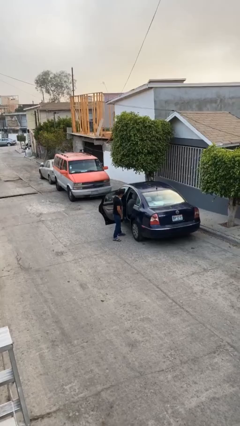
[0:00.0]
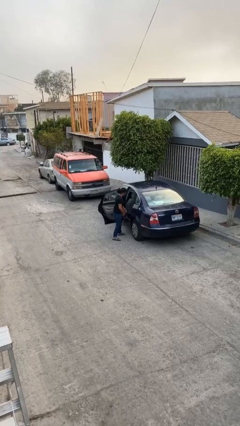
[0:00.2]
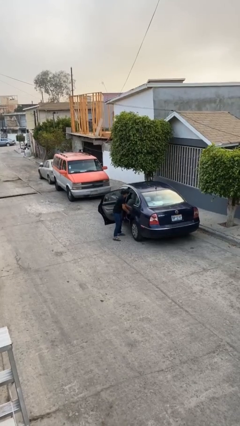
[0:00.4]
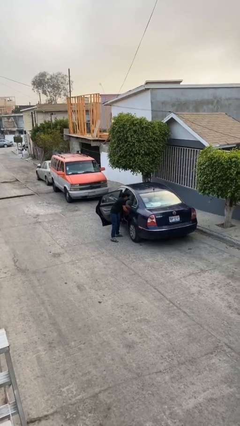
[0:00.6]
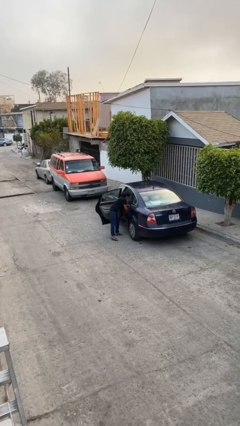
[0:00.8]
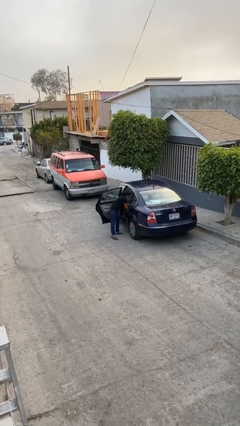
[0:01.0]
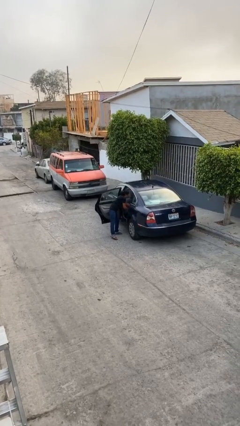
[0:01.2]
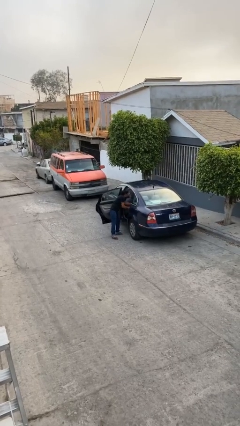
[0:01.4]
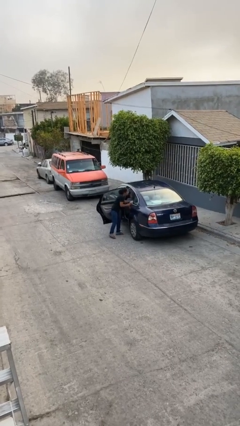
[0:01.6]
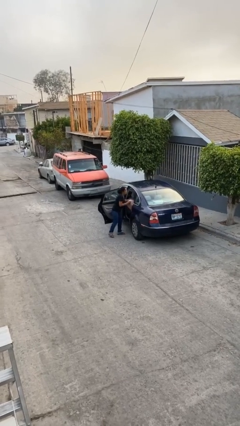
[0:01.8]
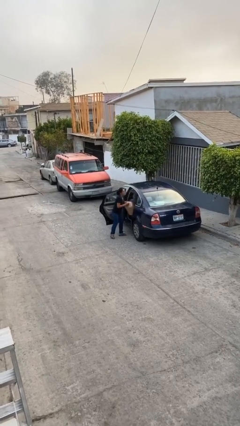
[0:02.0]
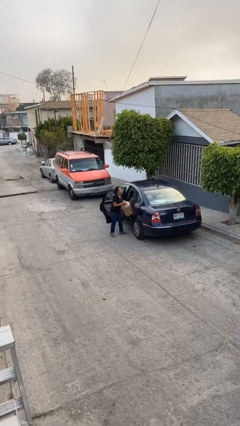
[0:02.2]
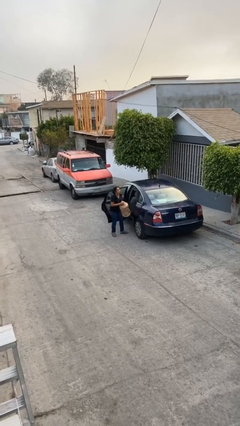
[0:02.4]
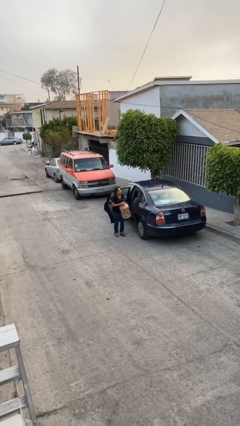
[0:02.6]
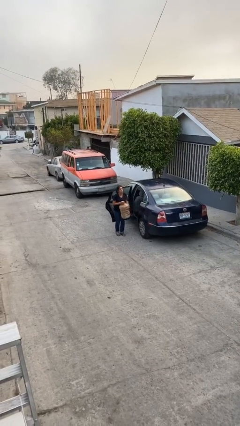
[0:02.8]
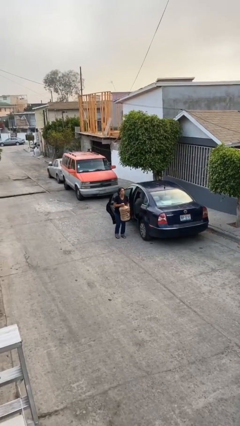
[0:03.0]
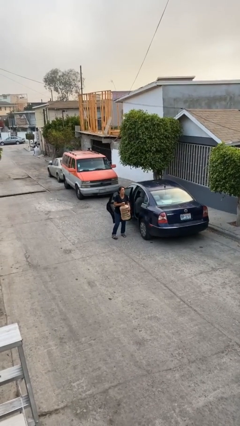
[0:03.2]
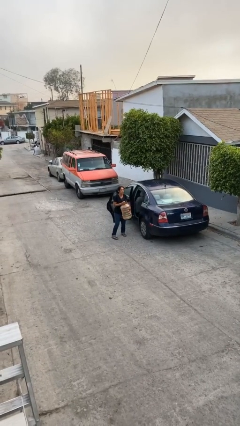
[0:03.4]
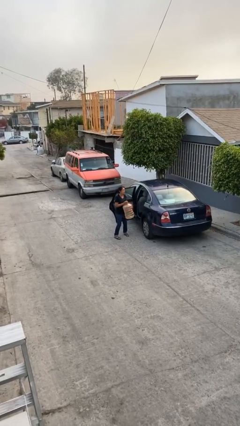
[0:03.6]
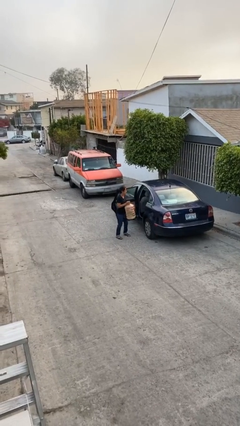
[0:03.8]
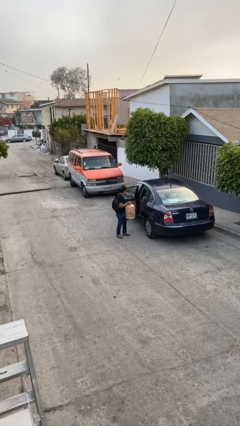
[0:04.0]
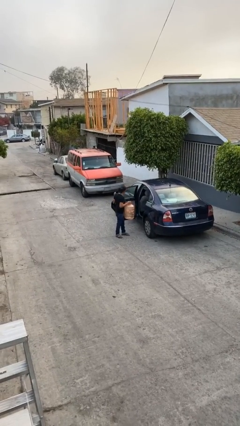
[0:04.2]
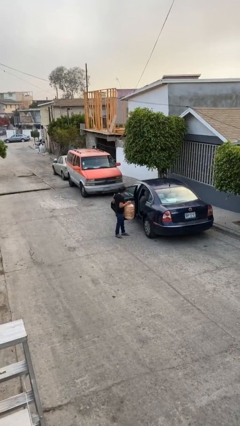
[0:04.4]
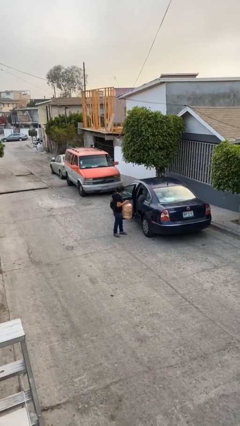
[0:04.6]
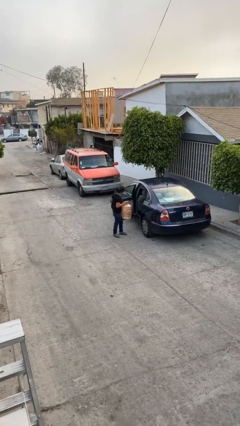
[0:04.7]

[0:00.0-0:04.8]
person unloads car

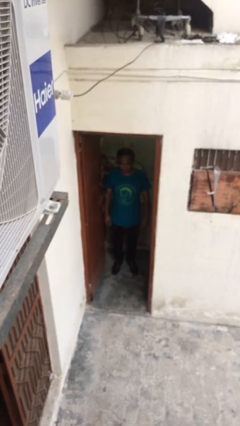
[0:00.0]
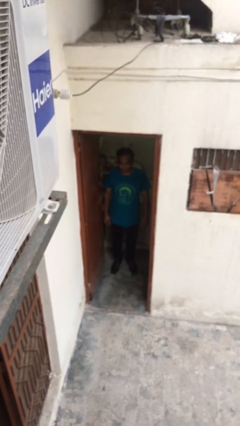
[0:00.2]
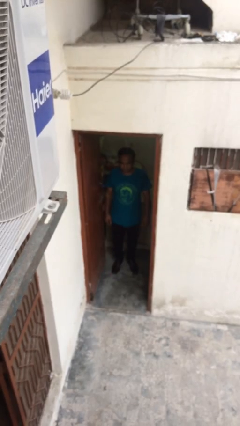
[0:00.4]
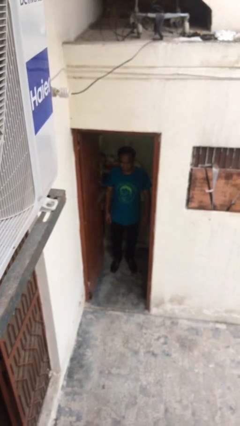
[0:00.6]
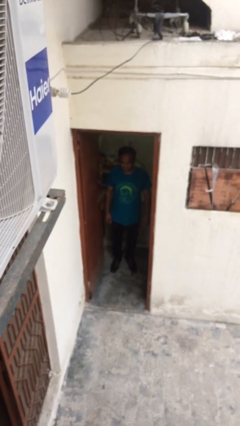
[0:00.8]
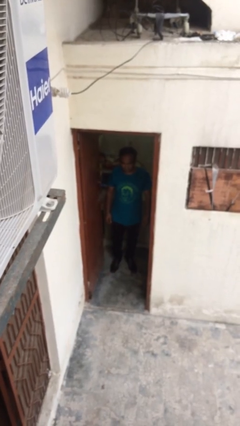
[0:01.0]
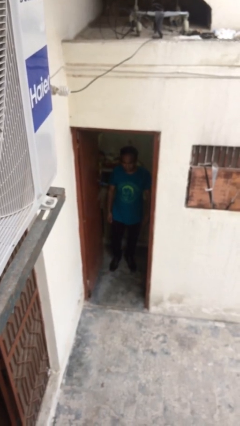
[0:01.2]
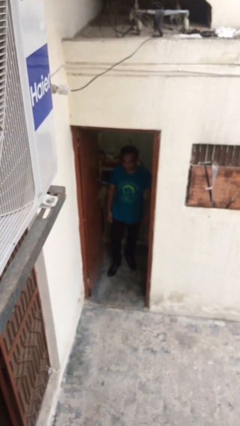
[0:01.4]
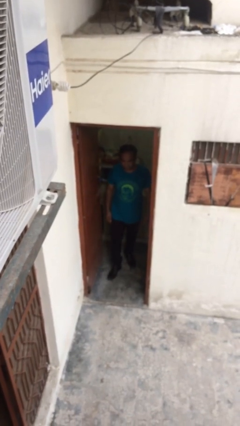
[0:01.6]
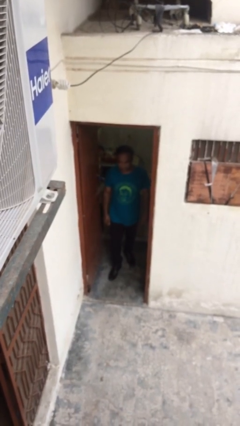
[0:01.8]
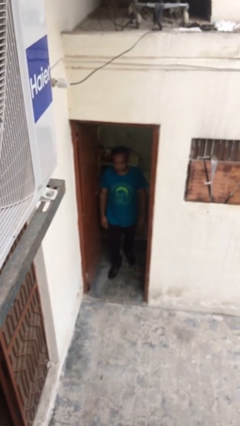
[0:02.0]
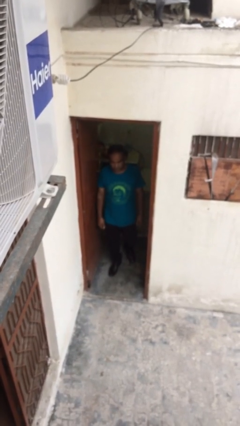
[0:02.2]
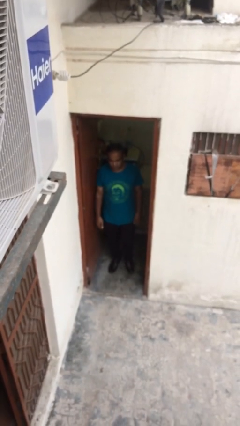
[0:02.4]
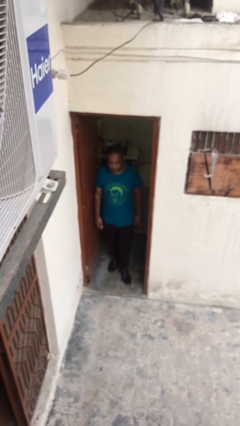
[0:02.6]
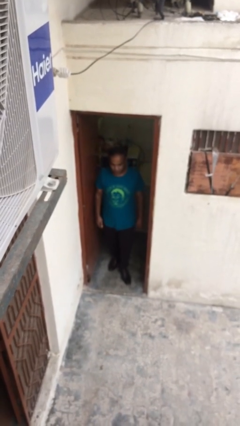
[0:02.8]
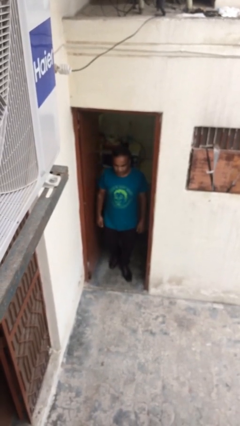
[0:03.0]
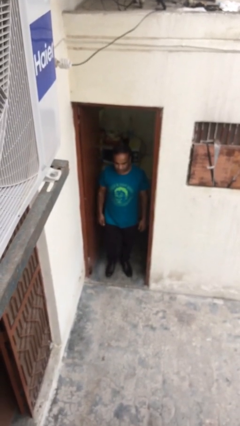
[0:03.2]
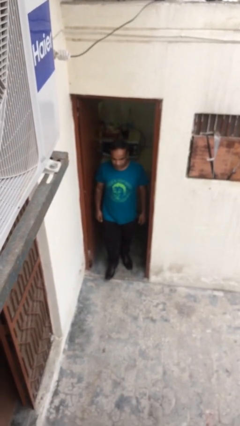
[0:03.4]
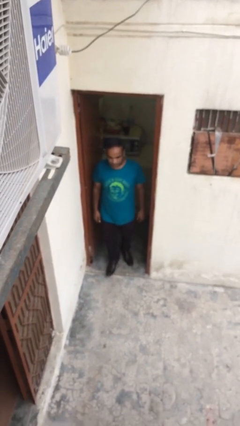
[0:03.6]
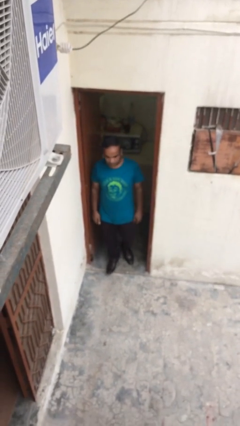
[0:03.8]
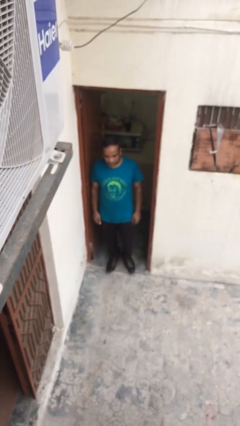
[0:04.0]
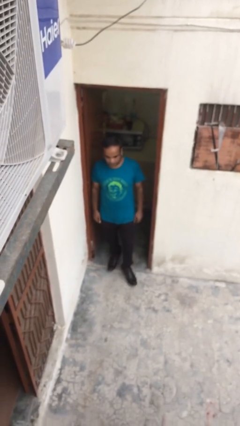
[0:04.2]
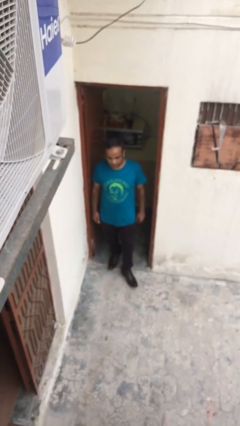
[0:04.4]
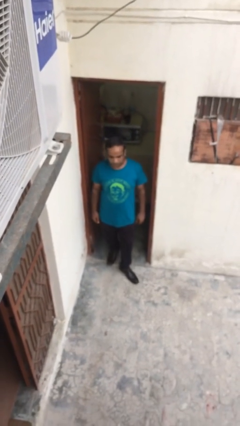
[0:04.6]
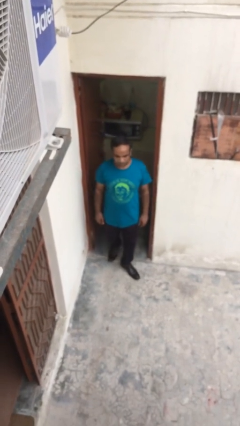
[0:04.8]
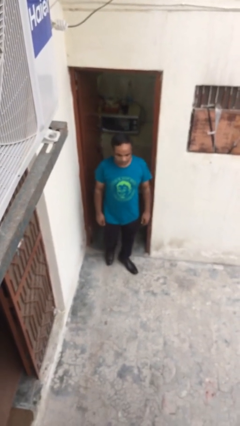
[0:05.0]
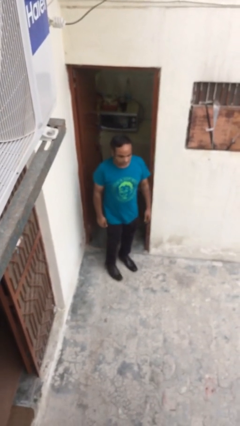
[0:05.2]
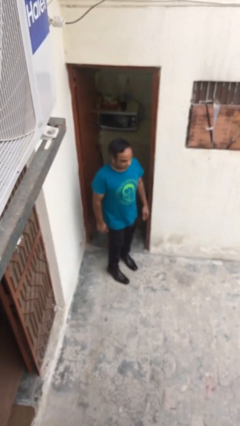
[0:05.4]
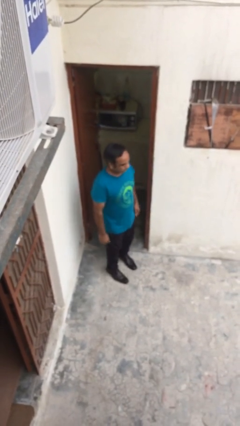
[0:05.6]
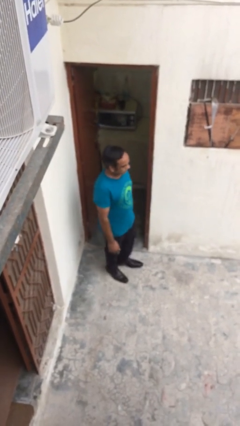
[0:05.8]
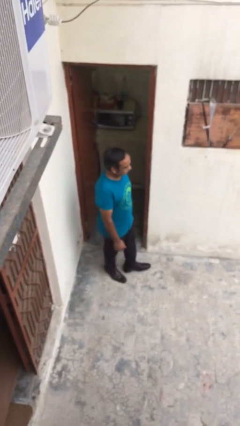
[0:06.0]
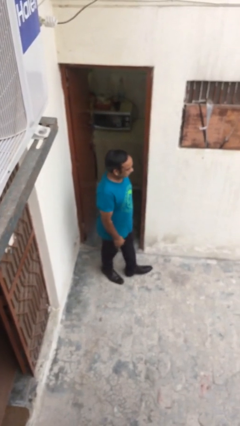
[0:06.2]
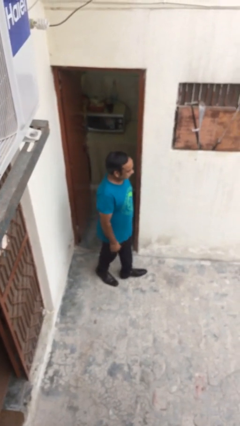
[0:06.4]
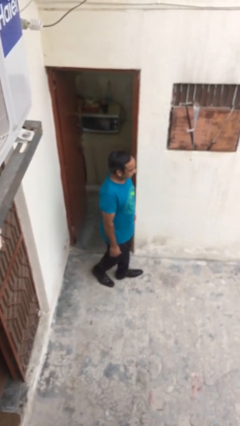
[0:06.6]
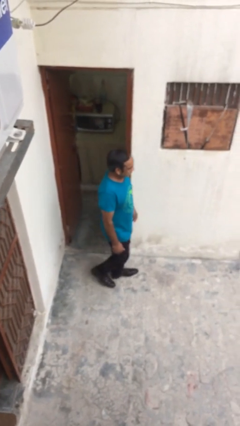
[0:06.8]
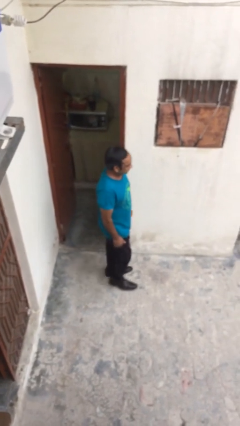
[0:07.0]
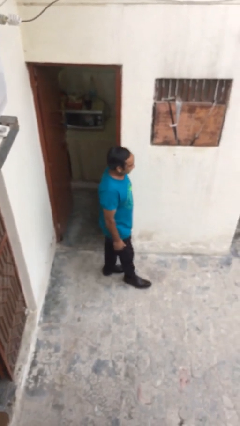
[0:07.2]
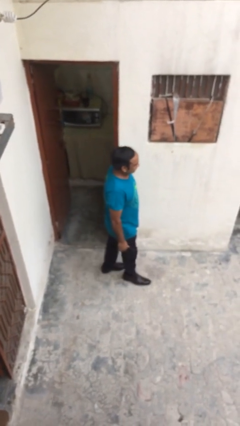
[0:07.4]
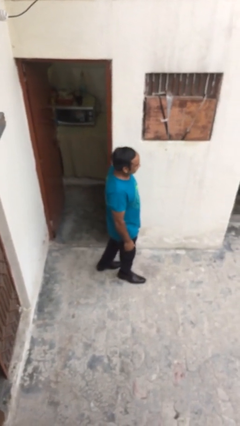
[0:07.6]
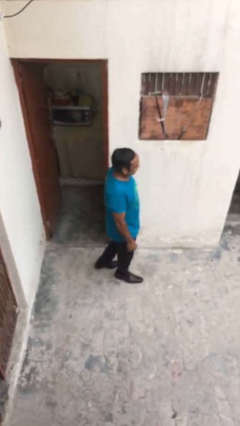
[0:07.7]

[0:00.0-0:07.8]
person enters scene through structure

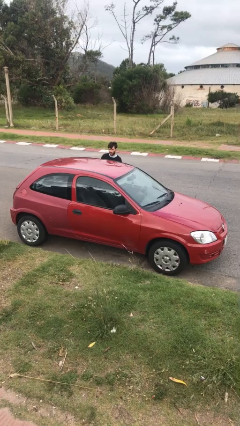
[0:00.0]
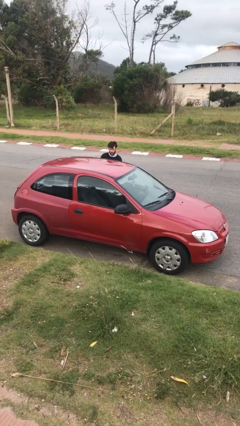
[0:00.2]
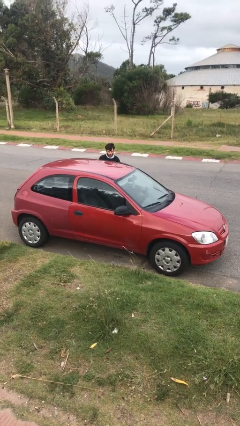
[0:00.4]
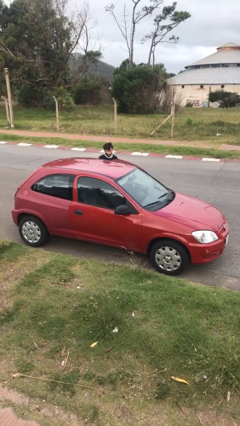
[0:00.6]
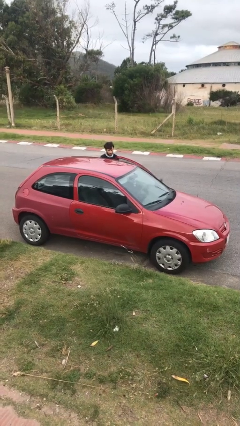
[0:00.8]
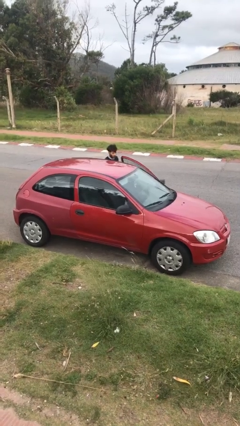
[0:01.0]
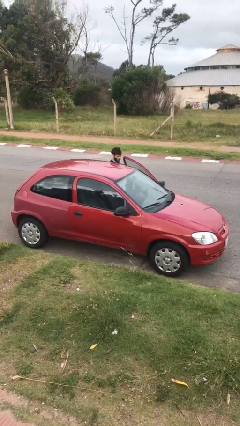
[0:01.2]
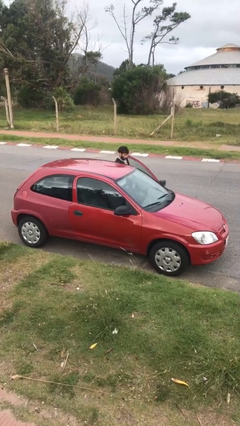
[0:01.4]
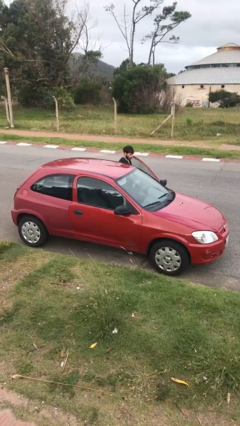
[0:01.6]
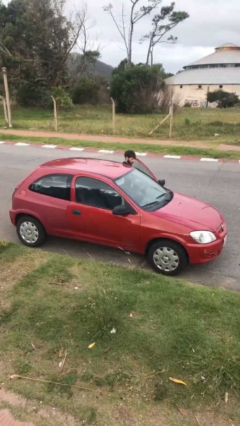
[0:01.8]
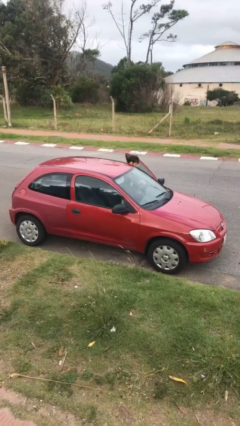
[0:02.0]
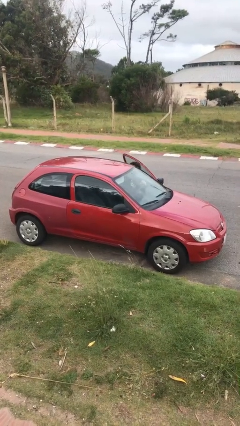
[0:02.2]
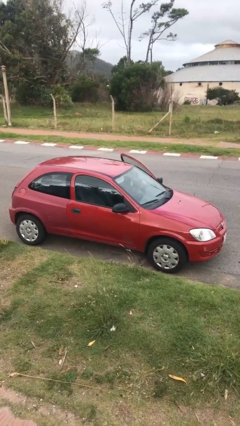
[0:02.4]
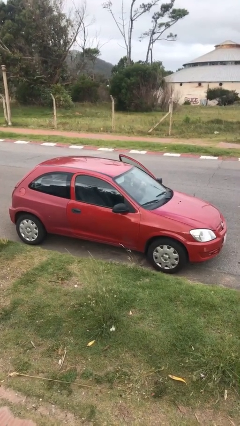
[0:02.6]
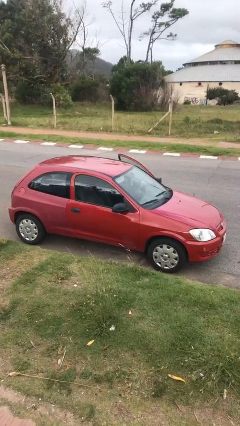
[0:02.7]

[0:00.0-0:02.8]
car picks up person

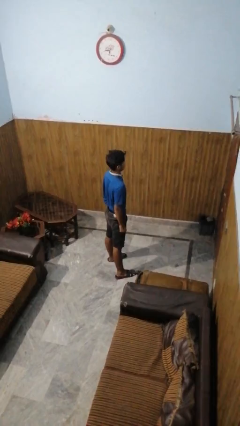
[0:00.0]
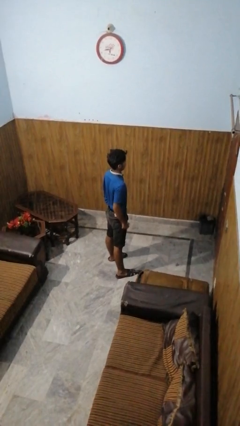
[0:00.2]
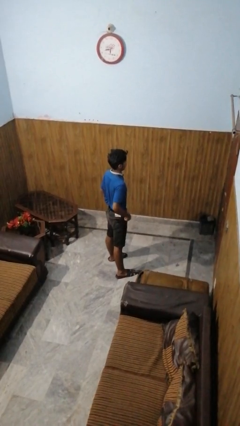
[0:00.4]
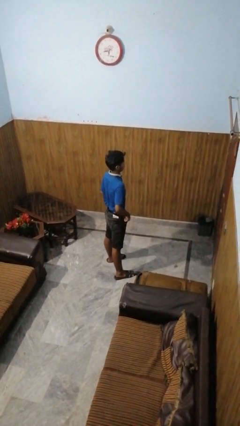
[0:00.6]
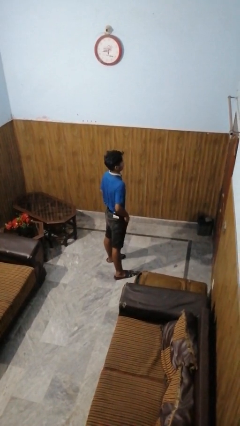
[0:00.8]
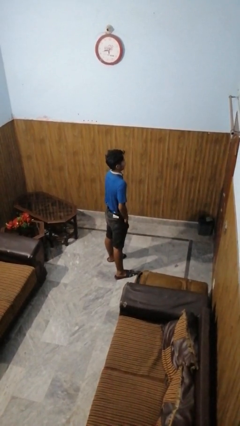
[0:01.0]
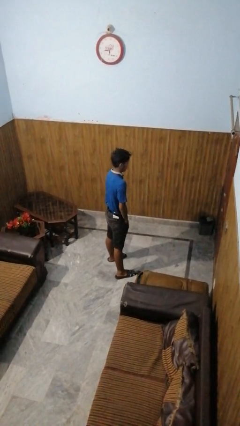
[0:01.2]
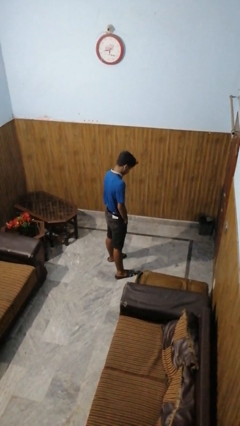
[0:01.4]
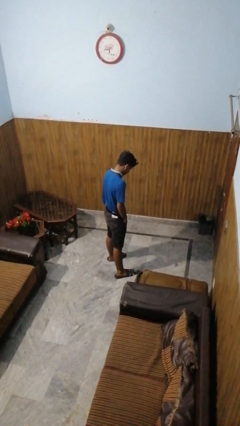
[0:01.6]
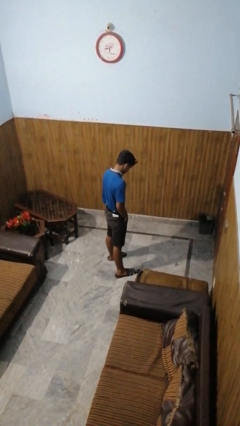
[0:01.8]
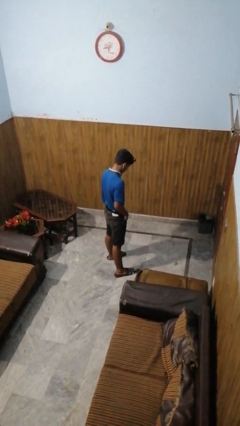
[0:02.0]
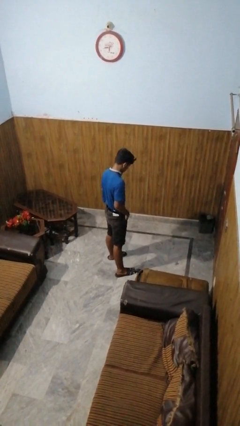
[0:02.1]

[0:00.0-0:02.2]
person puts hands in back pockets

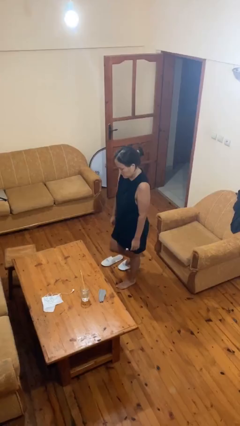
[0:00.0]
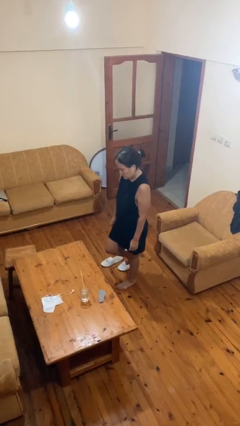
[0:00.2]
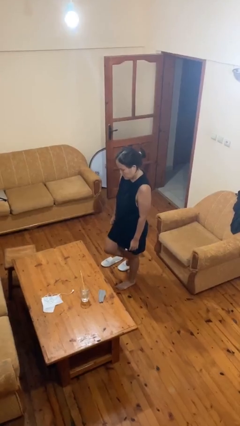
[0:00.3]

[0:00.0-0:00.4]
person climbs on table
